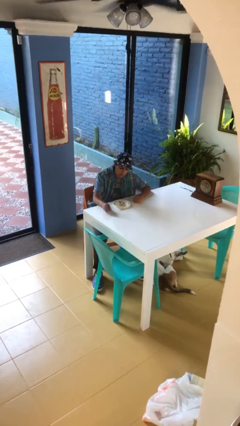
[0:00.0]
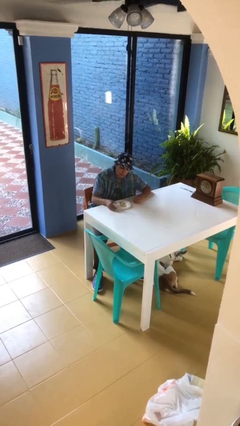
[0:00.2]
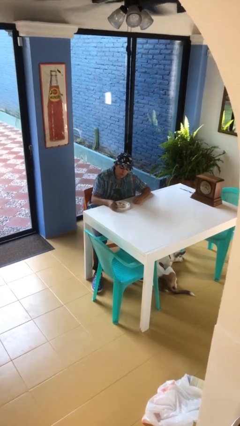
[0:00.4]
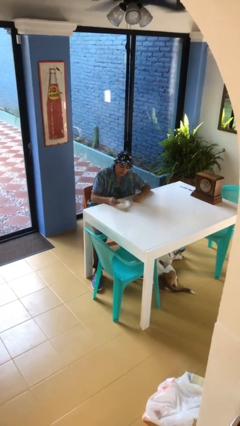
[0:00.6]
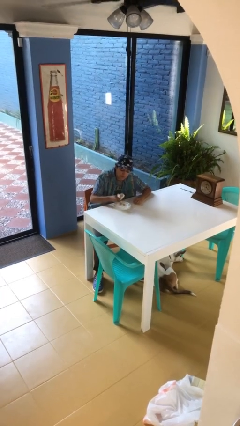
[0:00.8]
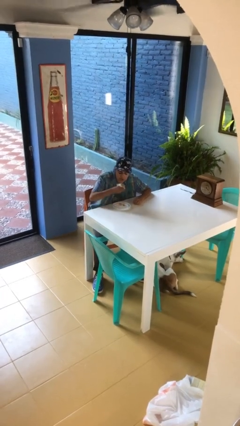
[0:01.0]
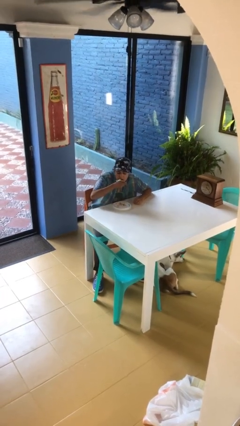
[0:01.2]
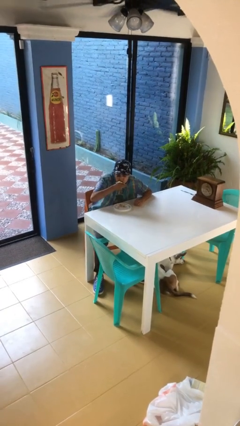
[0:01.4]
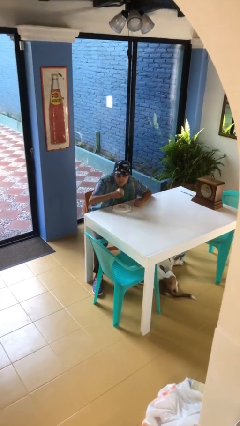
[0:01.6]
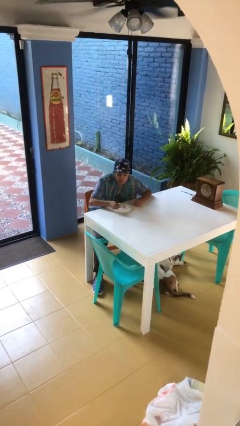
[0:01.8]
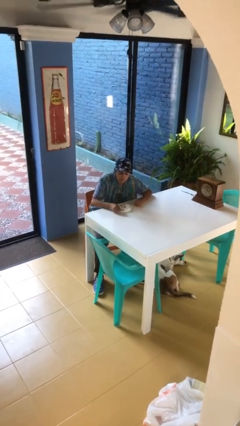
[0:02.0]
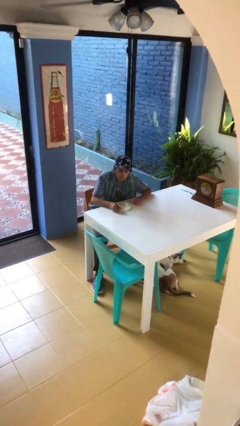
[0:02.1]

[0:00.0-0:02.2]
person eats with hands

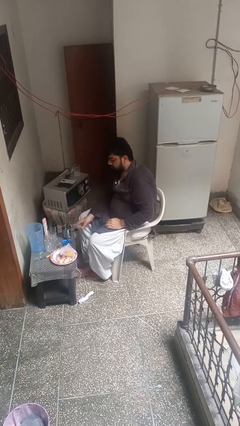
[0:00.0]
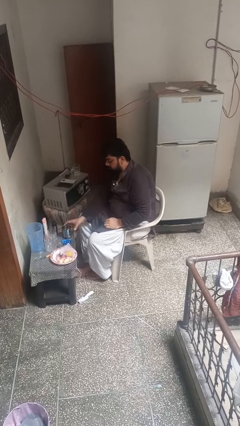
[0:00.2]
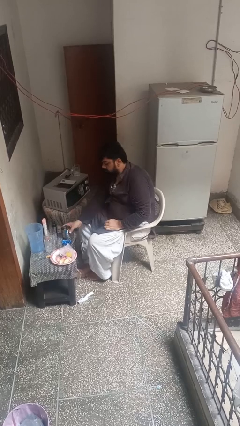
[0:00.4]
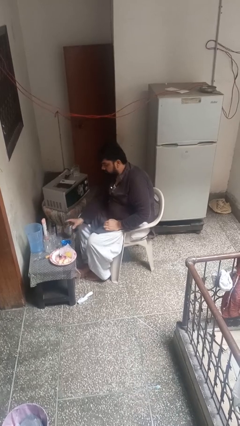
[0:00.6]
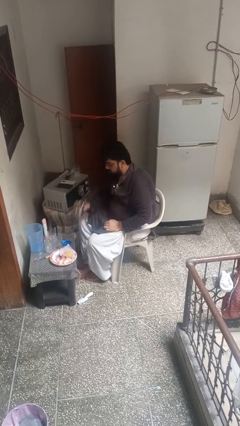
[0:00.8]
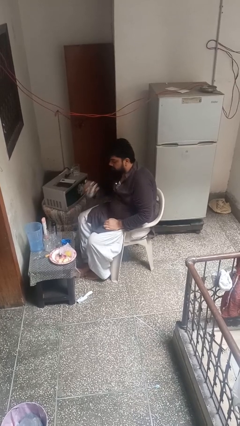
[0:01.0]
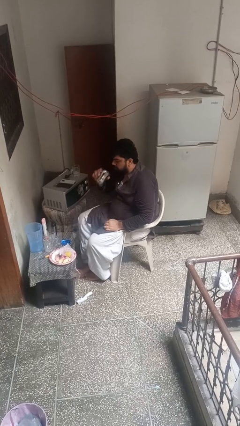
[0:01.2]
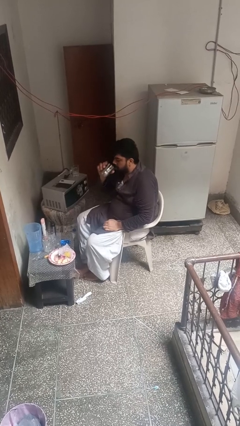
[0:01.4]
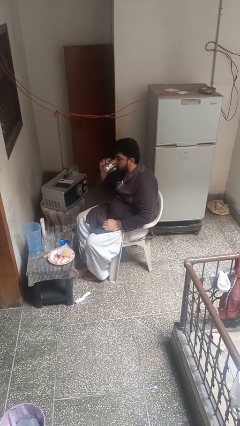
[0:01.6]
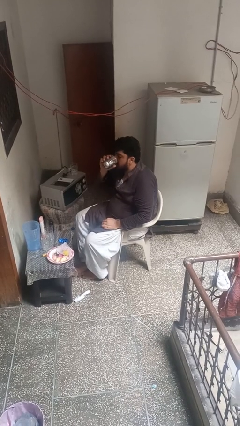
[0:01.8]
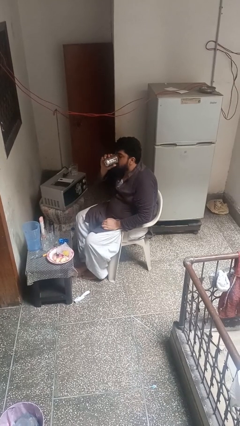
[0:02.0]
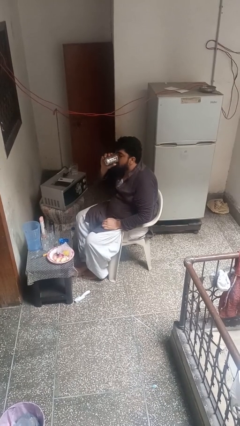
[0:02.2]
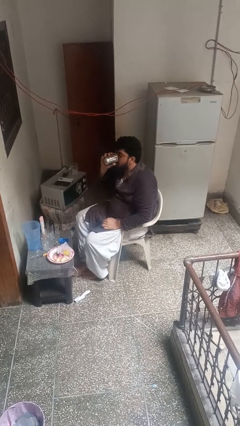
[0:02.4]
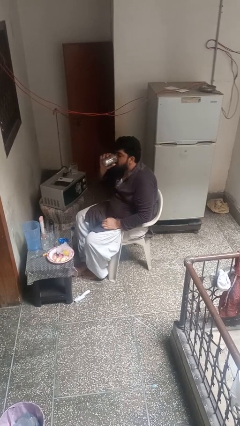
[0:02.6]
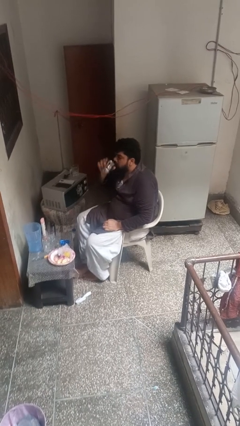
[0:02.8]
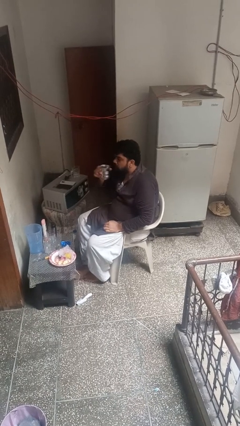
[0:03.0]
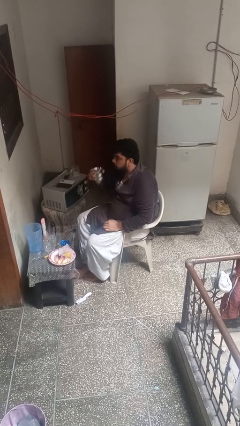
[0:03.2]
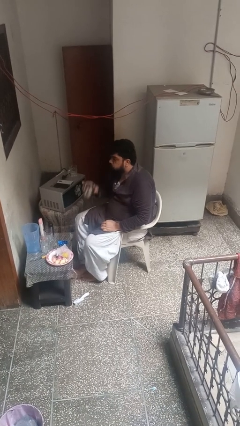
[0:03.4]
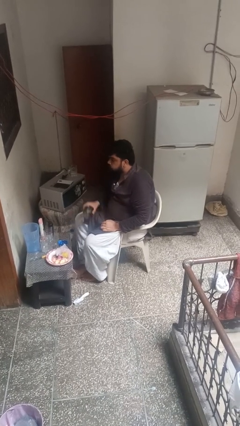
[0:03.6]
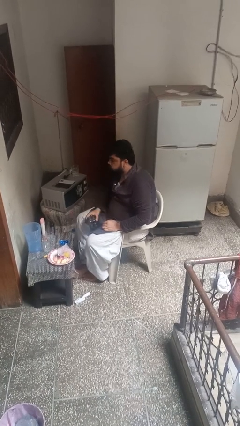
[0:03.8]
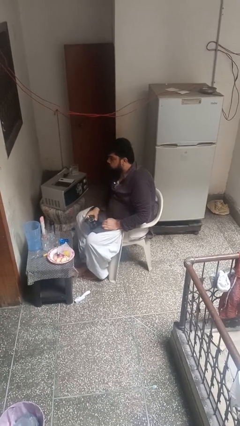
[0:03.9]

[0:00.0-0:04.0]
person drinks from cup

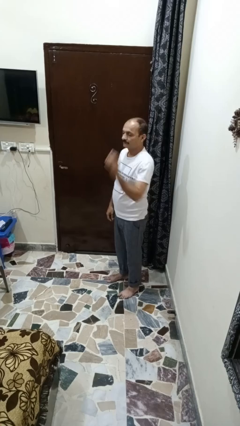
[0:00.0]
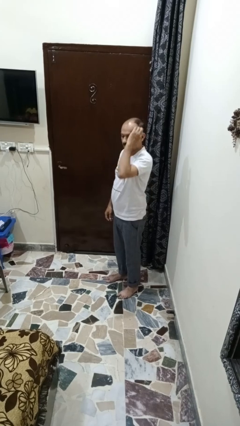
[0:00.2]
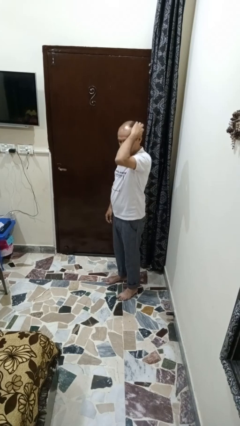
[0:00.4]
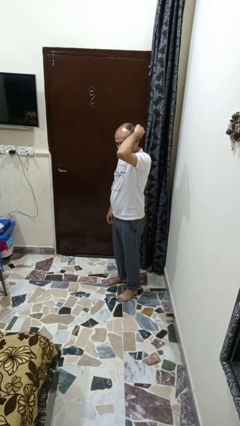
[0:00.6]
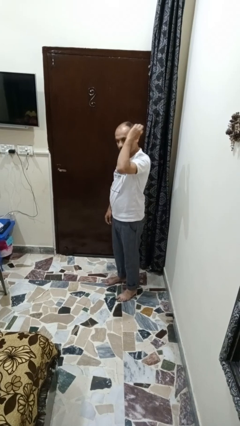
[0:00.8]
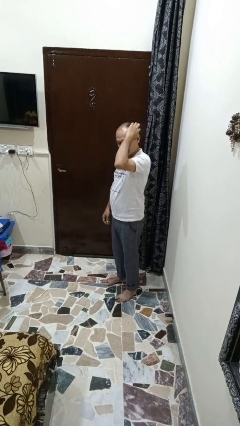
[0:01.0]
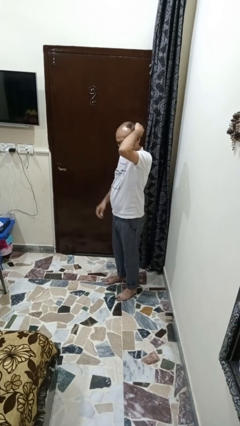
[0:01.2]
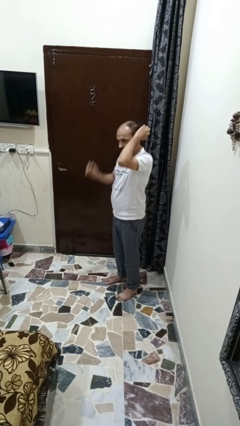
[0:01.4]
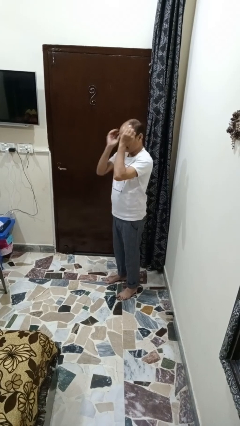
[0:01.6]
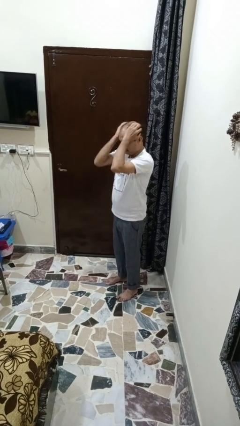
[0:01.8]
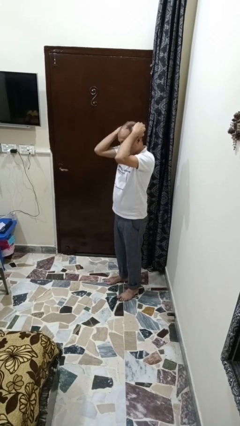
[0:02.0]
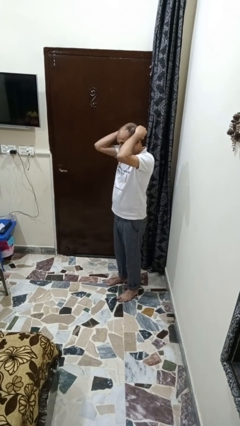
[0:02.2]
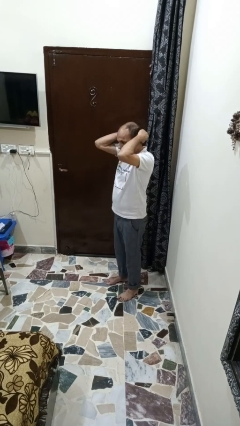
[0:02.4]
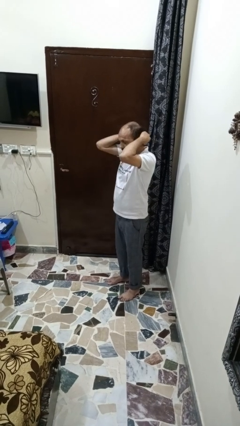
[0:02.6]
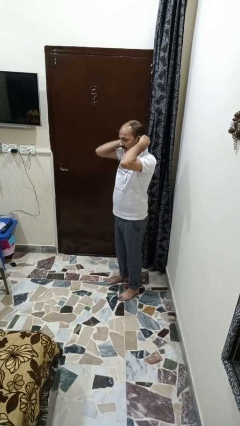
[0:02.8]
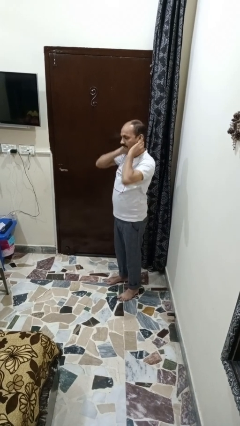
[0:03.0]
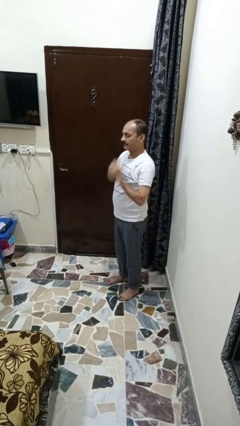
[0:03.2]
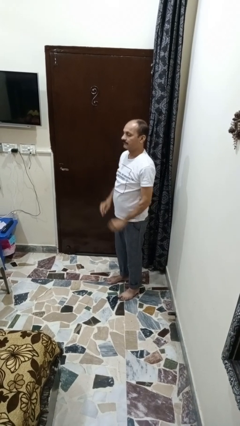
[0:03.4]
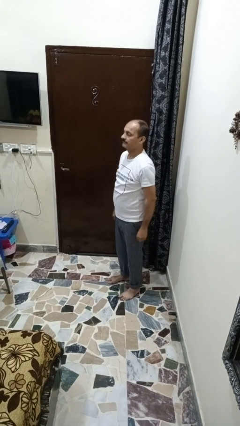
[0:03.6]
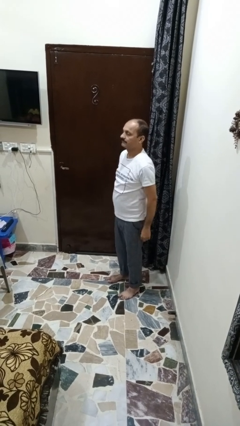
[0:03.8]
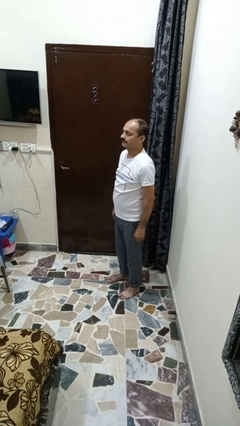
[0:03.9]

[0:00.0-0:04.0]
person strokes hair

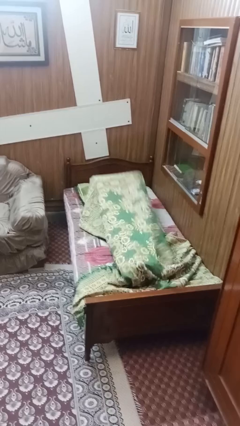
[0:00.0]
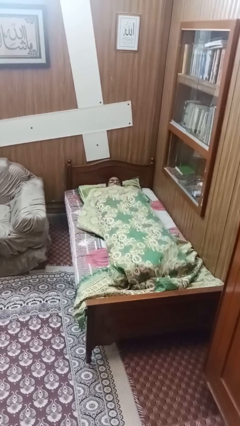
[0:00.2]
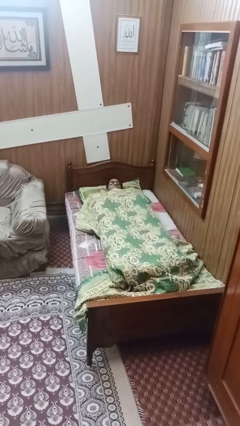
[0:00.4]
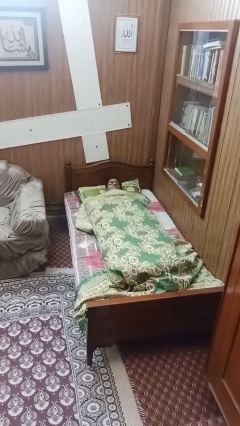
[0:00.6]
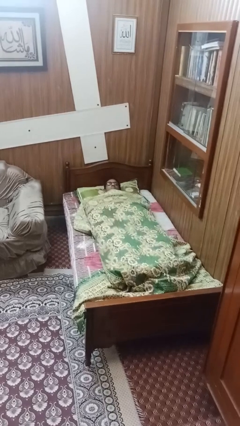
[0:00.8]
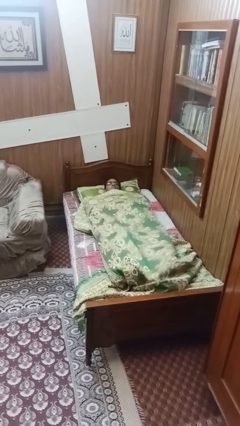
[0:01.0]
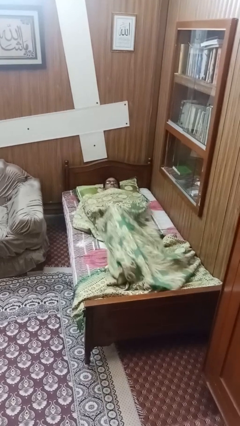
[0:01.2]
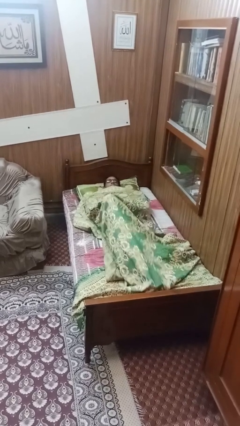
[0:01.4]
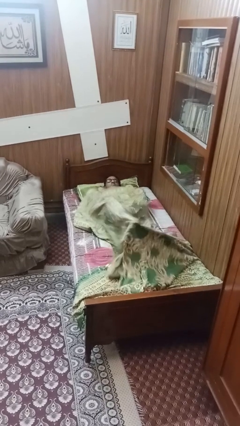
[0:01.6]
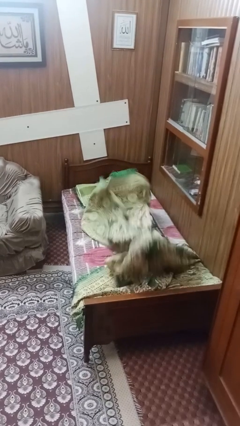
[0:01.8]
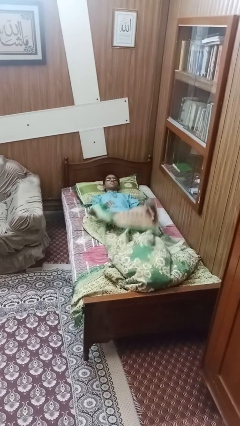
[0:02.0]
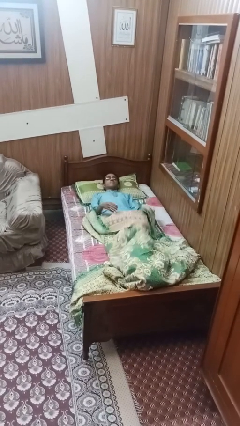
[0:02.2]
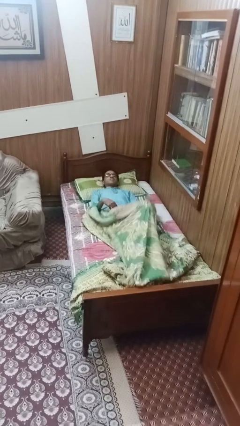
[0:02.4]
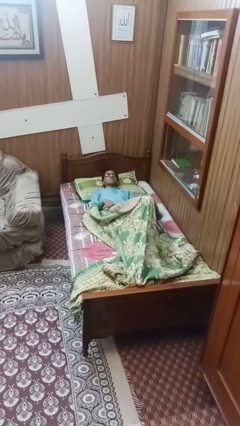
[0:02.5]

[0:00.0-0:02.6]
person covers with bedsheets

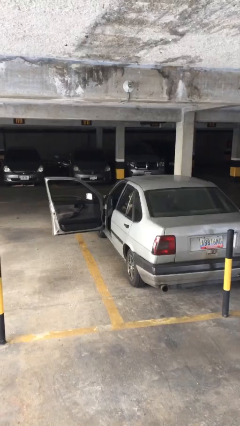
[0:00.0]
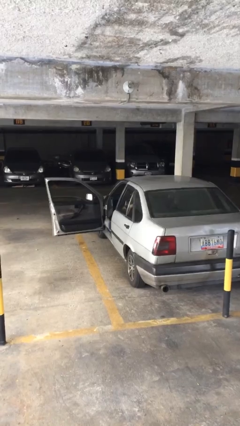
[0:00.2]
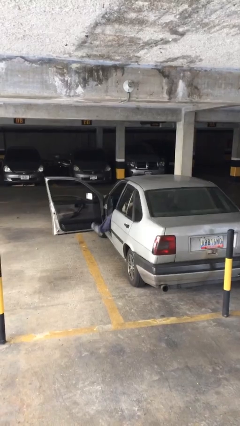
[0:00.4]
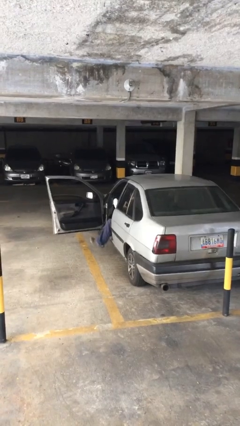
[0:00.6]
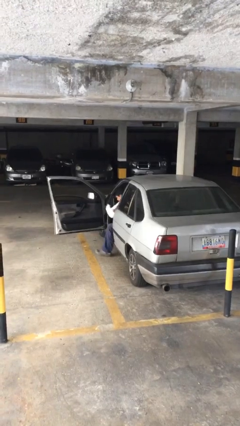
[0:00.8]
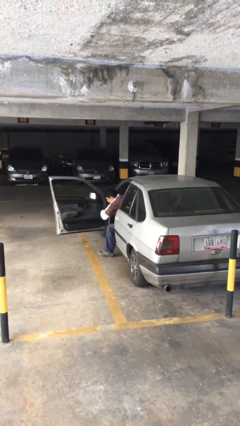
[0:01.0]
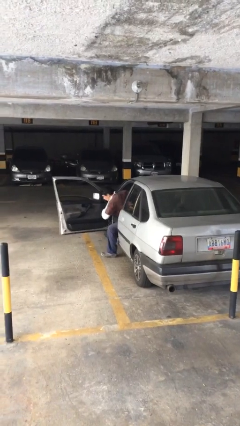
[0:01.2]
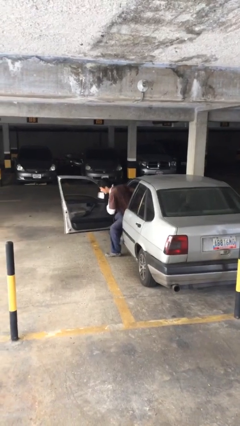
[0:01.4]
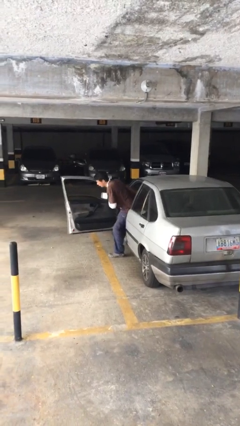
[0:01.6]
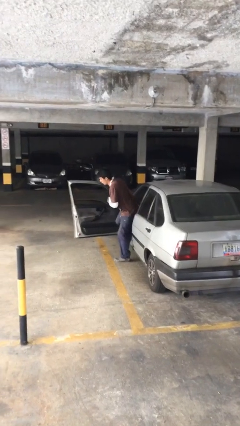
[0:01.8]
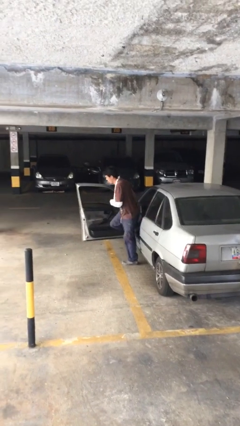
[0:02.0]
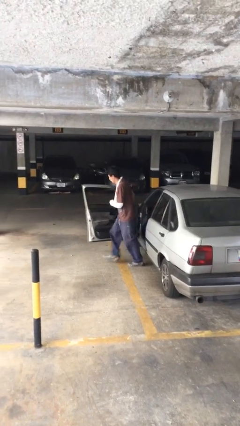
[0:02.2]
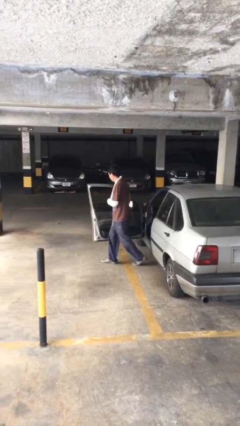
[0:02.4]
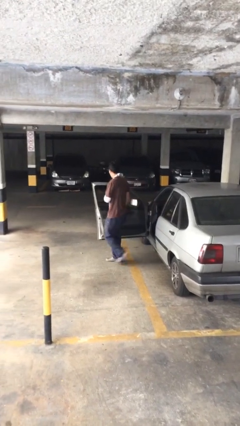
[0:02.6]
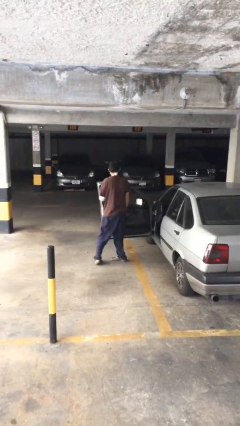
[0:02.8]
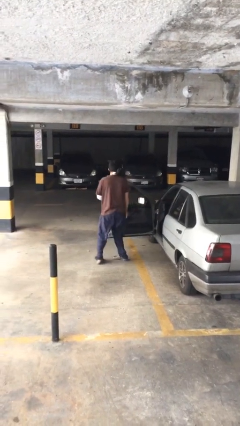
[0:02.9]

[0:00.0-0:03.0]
person exits car

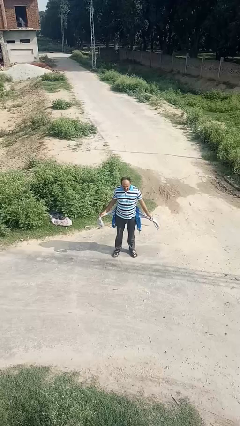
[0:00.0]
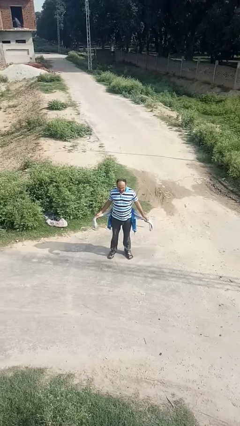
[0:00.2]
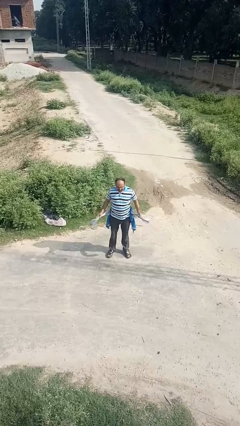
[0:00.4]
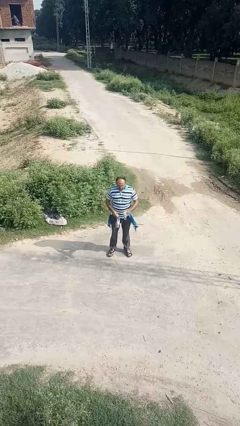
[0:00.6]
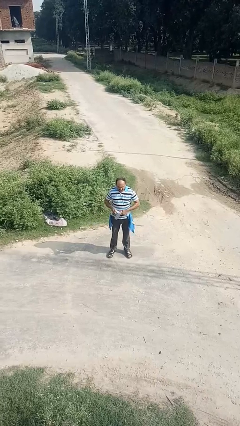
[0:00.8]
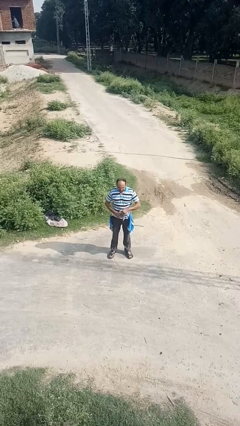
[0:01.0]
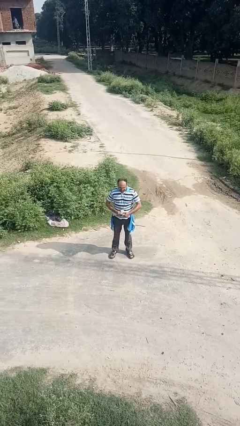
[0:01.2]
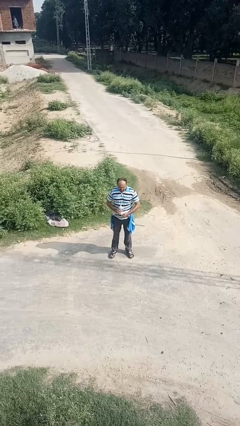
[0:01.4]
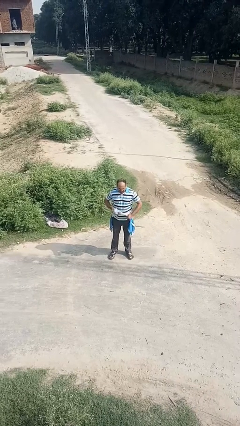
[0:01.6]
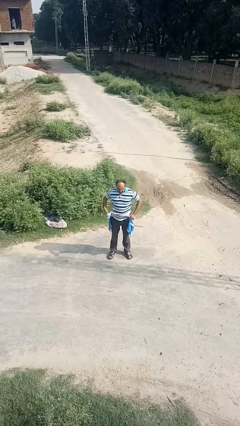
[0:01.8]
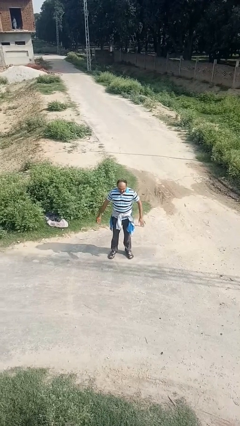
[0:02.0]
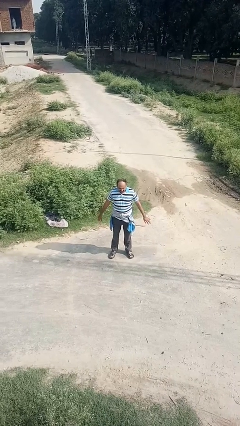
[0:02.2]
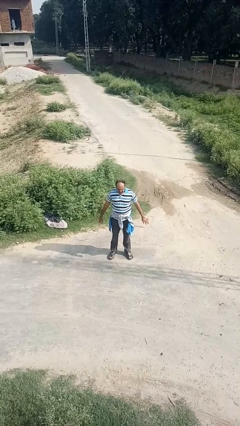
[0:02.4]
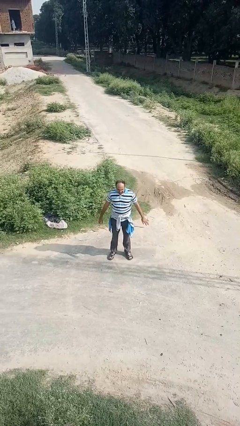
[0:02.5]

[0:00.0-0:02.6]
person ties jacket around waist
